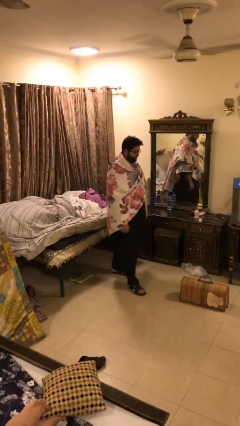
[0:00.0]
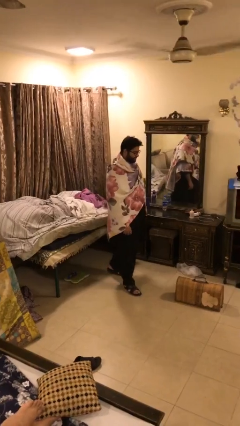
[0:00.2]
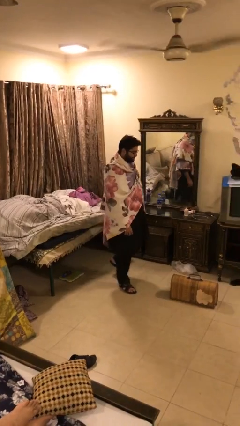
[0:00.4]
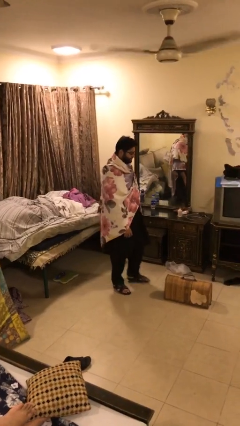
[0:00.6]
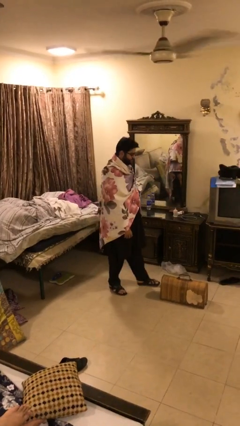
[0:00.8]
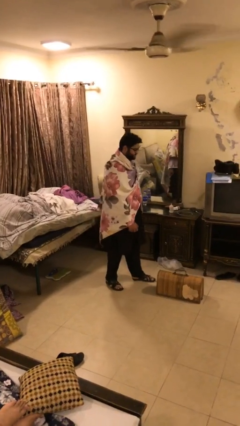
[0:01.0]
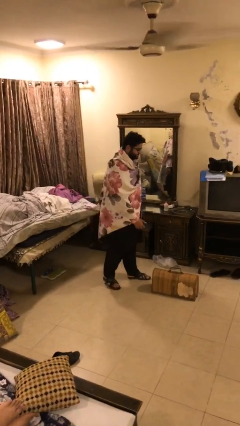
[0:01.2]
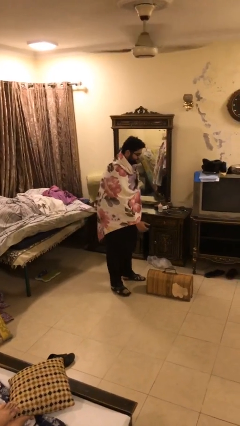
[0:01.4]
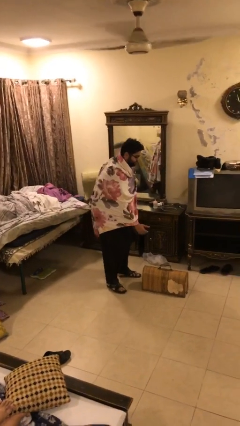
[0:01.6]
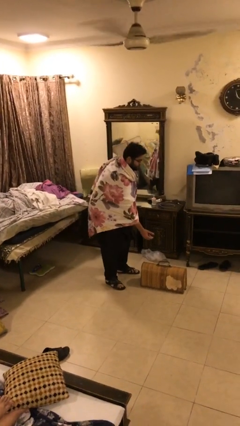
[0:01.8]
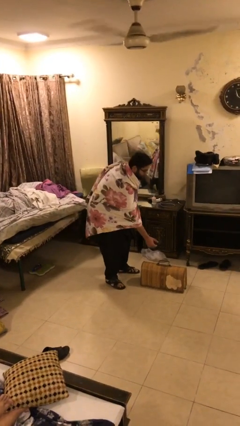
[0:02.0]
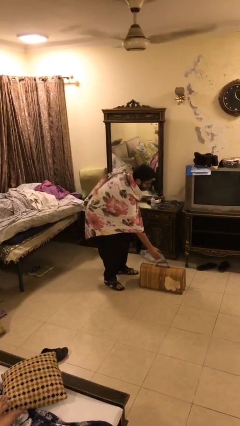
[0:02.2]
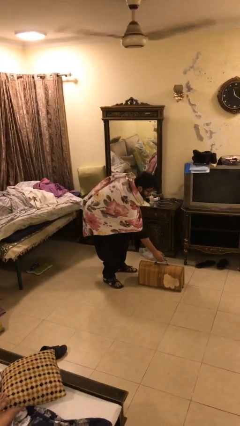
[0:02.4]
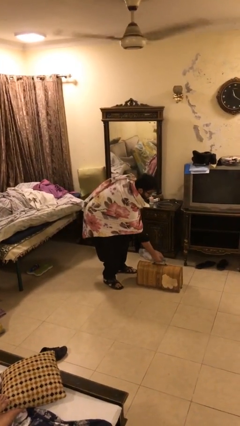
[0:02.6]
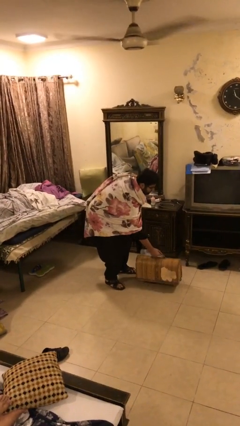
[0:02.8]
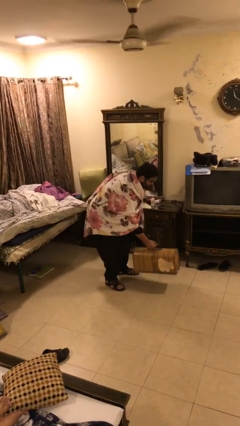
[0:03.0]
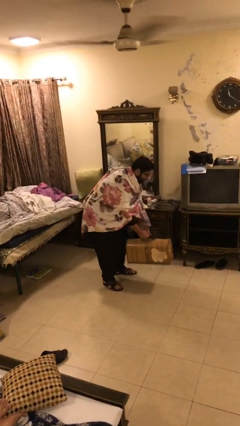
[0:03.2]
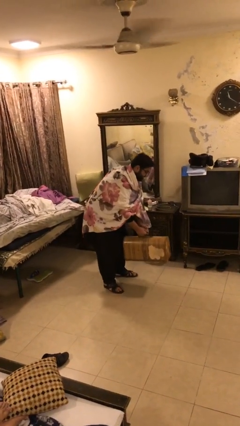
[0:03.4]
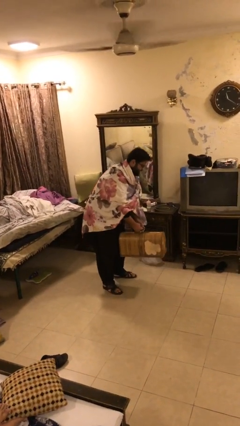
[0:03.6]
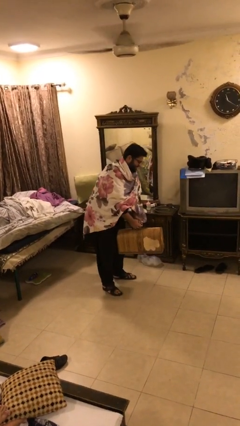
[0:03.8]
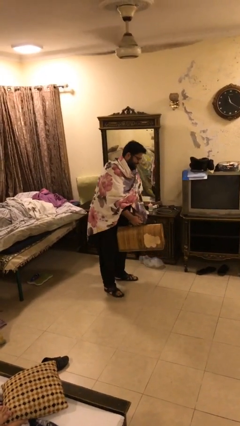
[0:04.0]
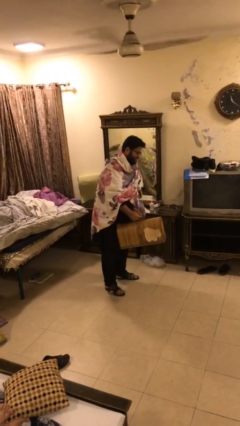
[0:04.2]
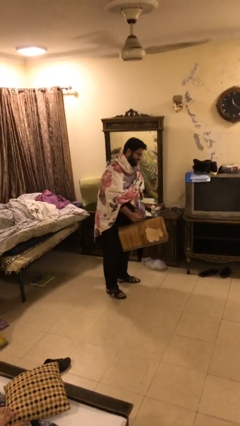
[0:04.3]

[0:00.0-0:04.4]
person picks up object from floor

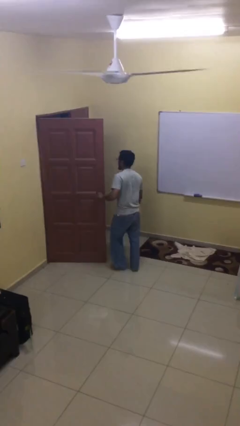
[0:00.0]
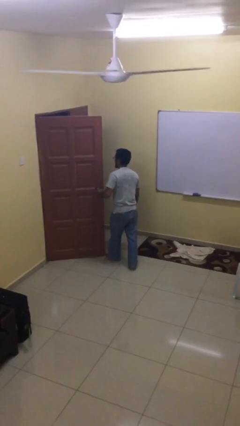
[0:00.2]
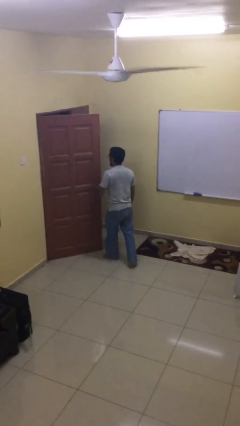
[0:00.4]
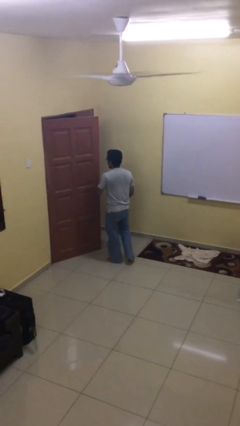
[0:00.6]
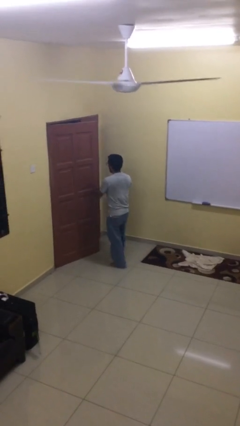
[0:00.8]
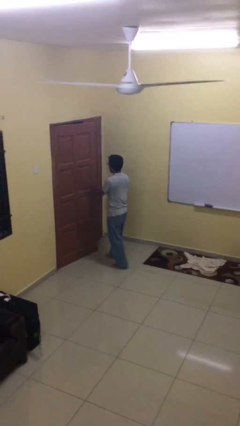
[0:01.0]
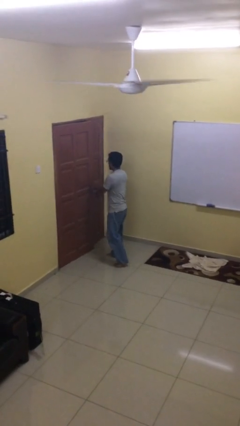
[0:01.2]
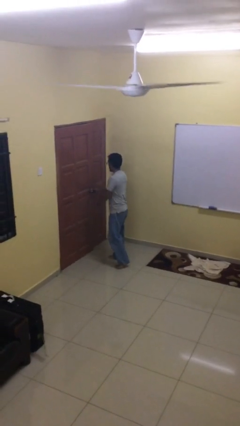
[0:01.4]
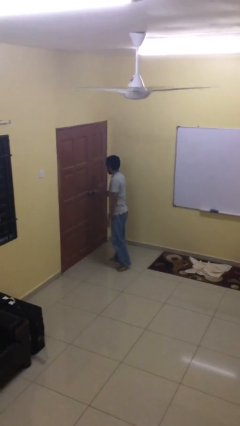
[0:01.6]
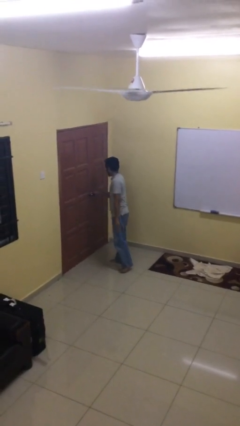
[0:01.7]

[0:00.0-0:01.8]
person closes facility door

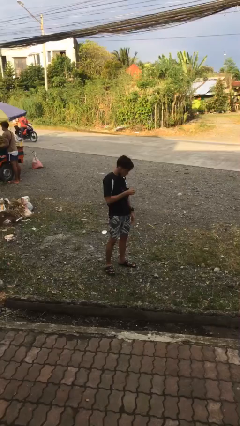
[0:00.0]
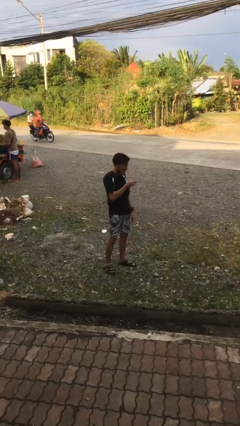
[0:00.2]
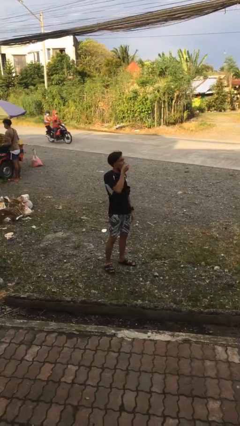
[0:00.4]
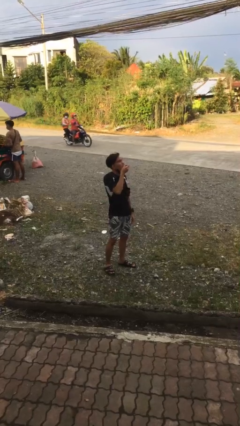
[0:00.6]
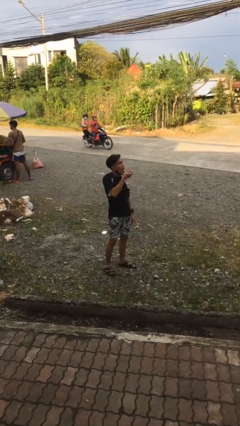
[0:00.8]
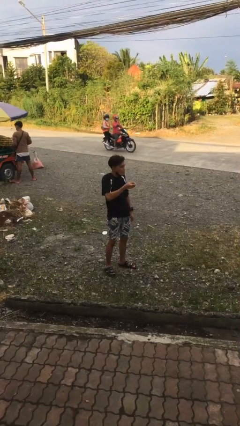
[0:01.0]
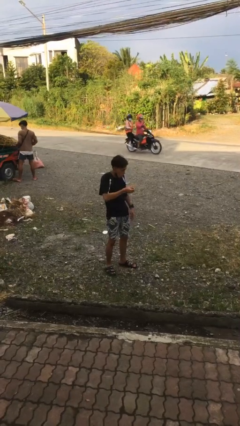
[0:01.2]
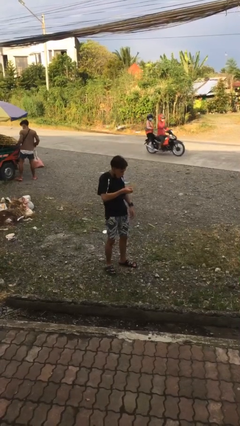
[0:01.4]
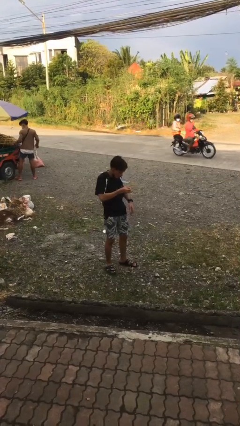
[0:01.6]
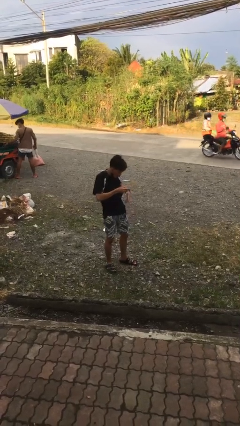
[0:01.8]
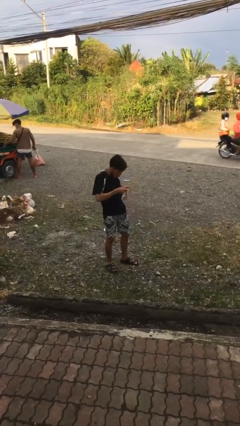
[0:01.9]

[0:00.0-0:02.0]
person eats snack from bag

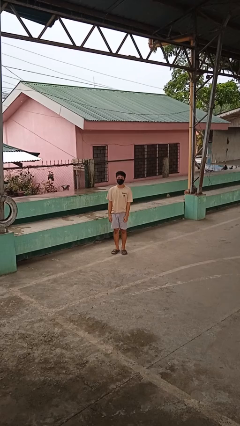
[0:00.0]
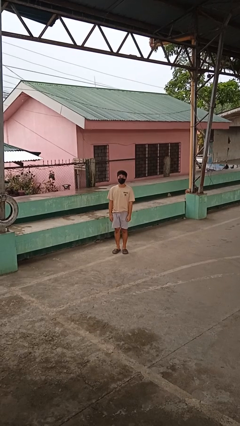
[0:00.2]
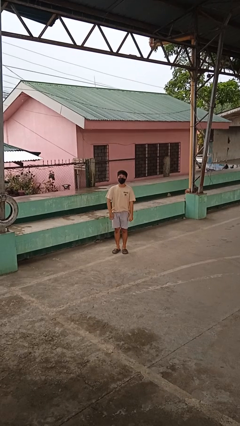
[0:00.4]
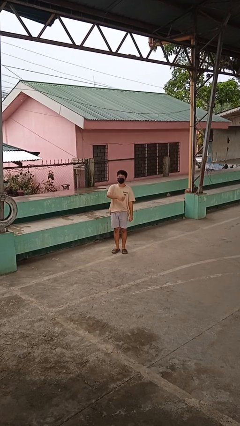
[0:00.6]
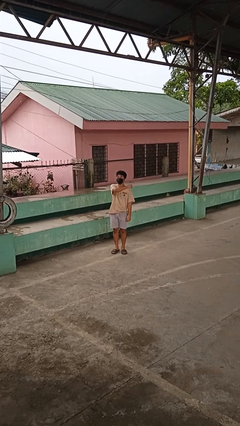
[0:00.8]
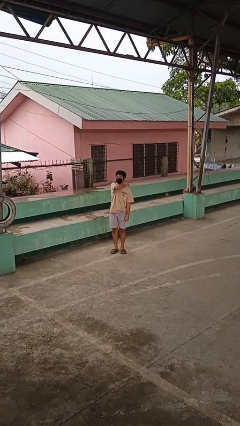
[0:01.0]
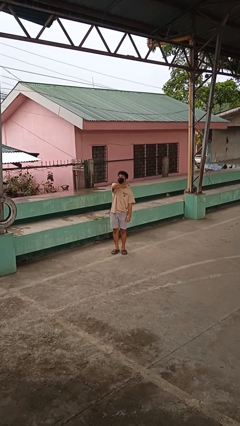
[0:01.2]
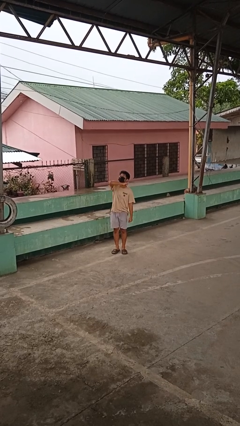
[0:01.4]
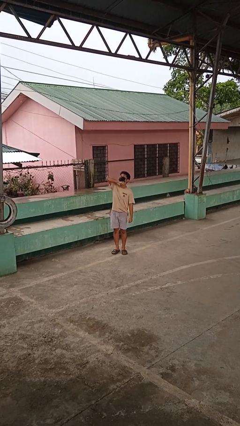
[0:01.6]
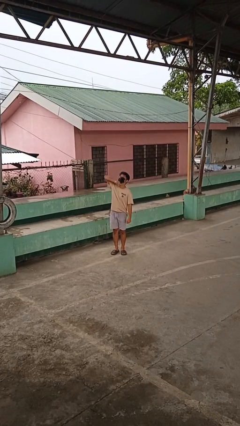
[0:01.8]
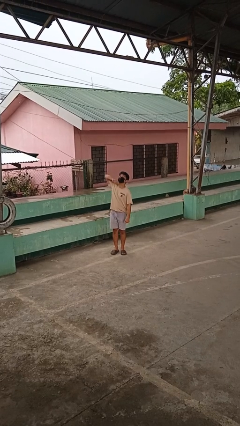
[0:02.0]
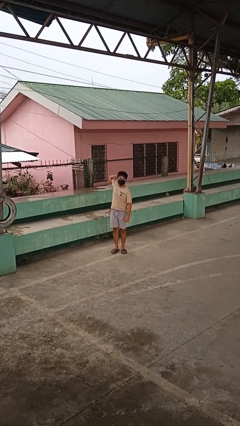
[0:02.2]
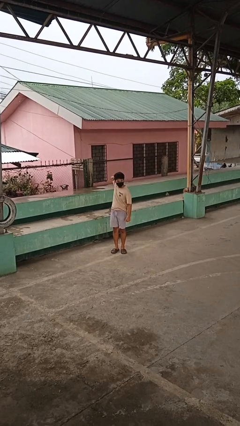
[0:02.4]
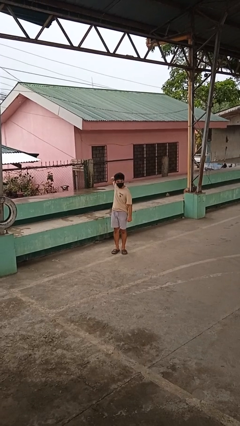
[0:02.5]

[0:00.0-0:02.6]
person gestures cut

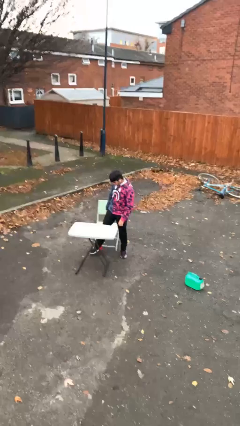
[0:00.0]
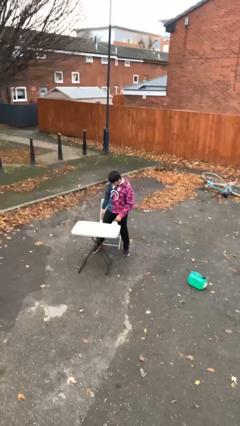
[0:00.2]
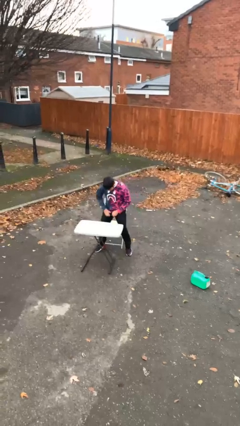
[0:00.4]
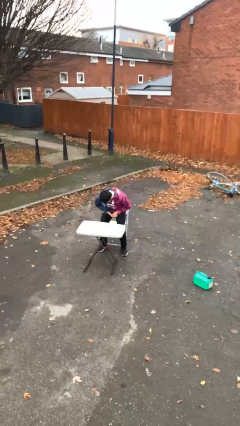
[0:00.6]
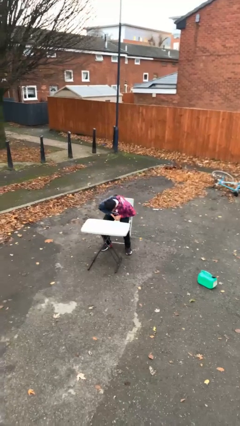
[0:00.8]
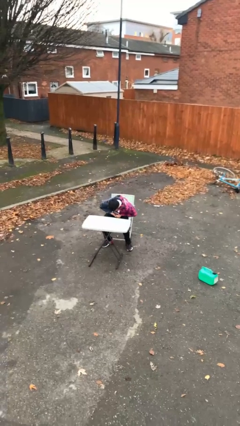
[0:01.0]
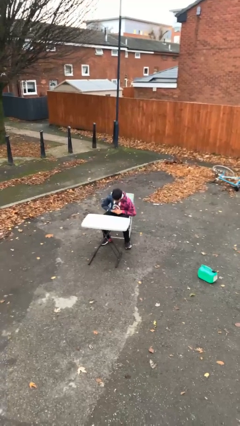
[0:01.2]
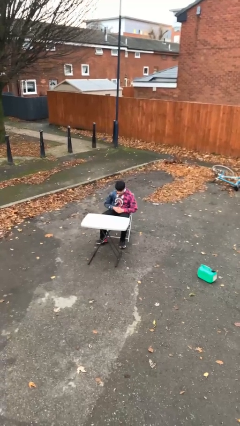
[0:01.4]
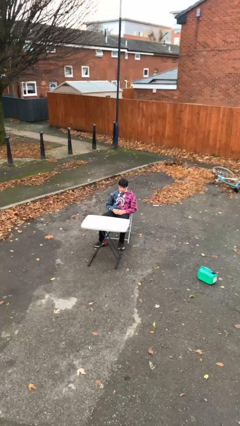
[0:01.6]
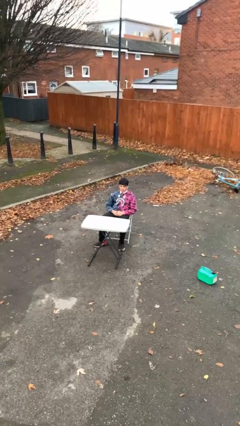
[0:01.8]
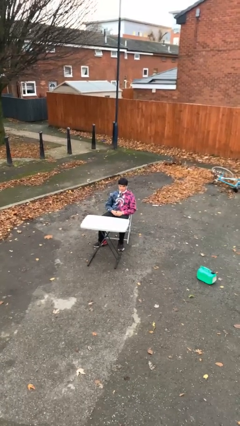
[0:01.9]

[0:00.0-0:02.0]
person sits down

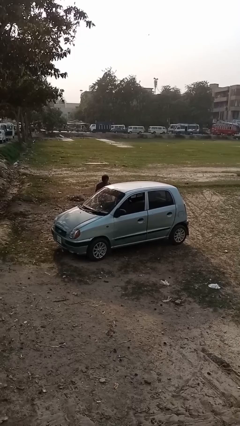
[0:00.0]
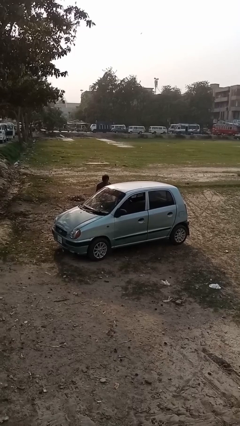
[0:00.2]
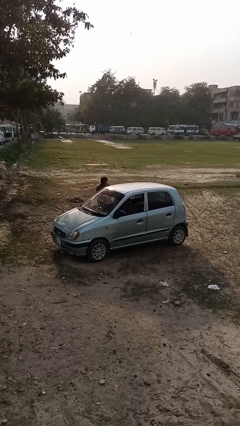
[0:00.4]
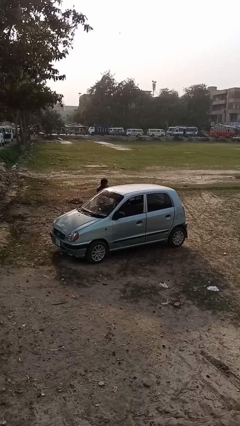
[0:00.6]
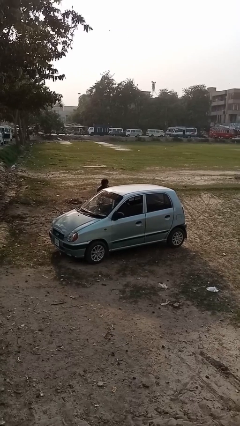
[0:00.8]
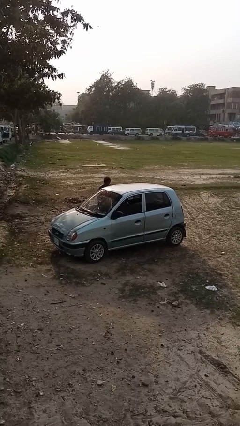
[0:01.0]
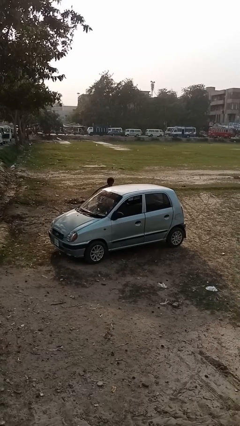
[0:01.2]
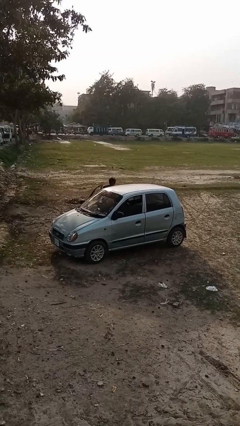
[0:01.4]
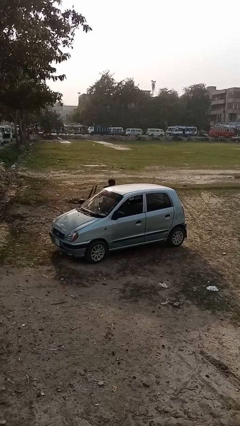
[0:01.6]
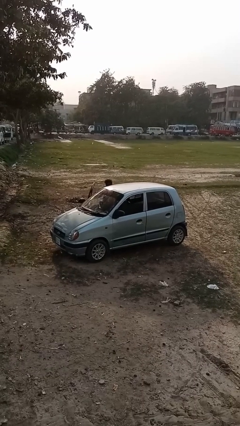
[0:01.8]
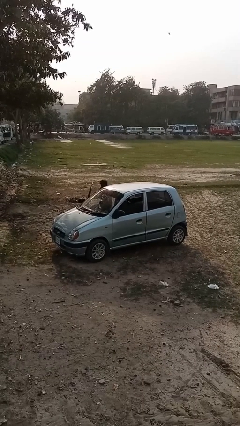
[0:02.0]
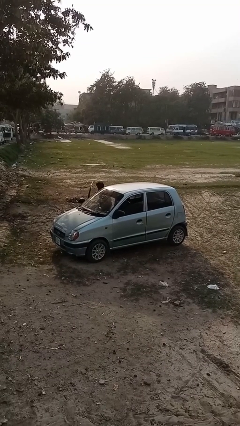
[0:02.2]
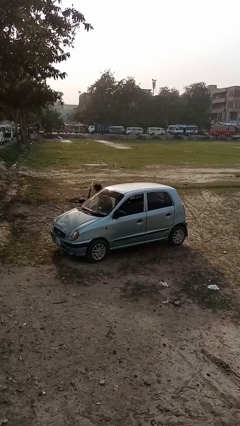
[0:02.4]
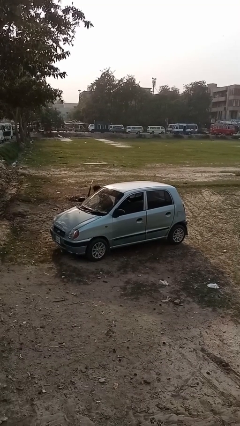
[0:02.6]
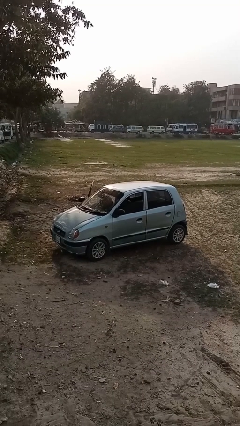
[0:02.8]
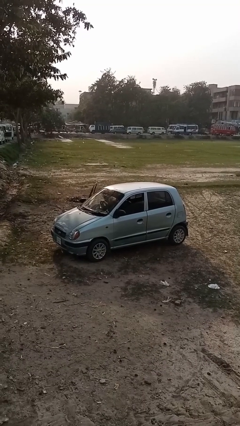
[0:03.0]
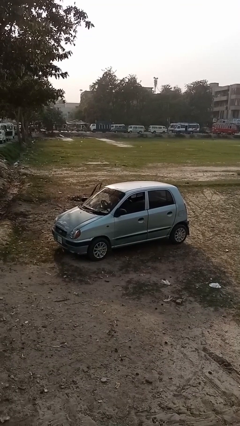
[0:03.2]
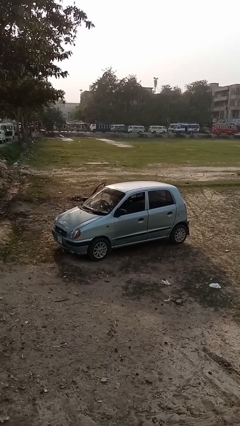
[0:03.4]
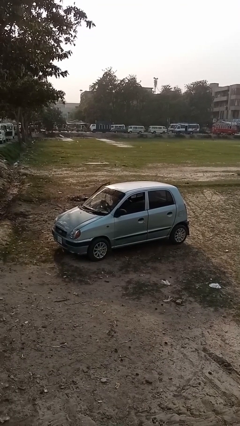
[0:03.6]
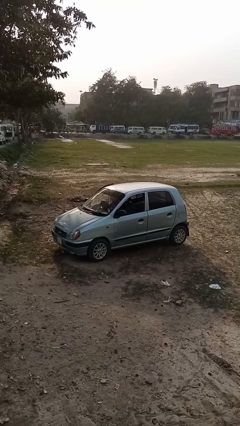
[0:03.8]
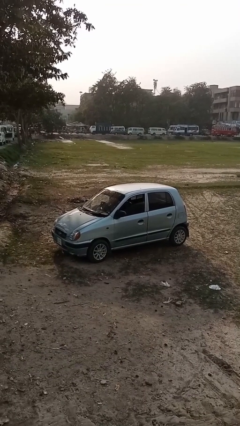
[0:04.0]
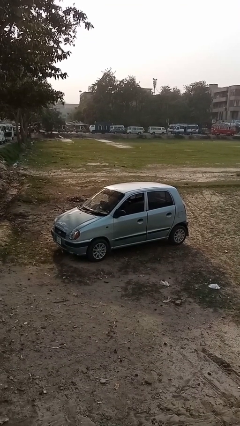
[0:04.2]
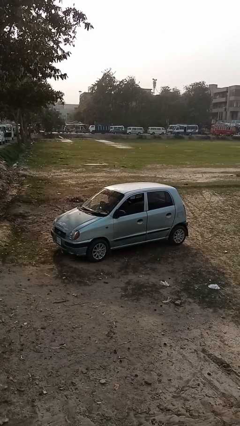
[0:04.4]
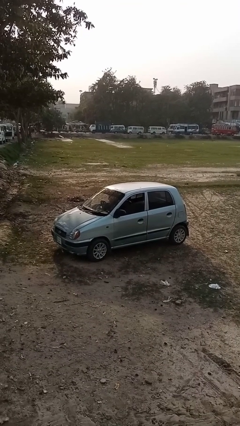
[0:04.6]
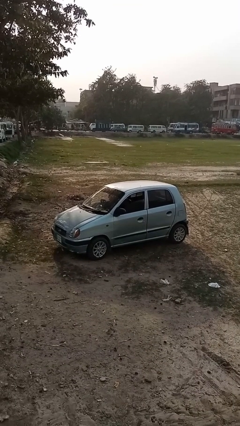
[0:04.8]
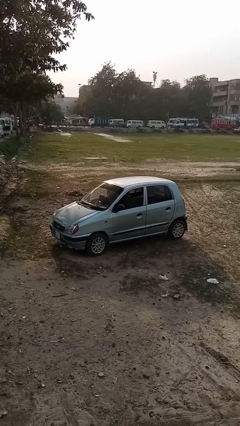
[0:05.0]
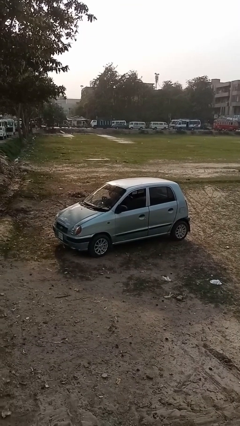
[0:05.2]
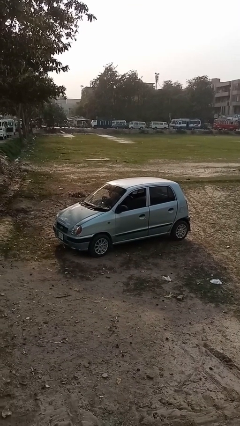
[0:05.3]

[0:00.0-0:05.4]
car picks up person
